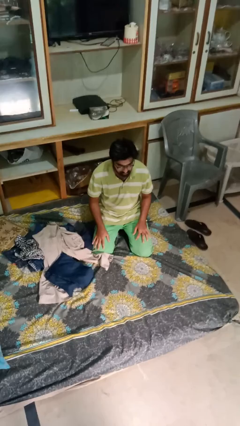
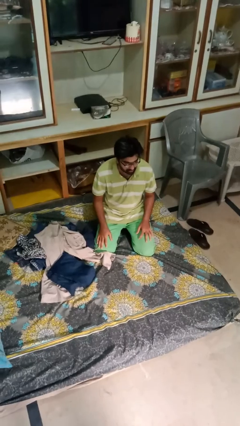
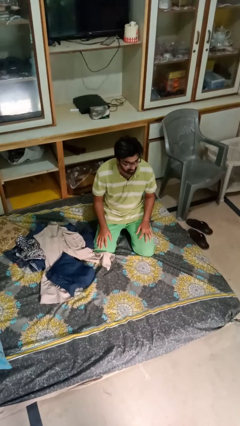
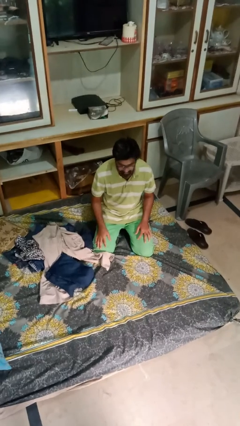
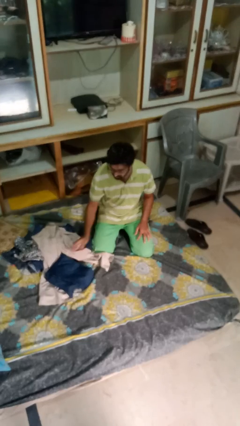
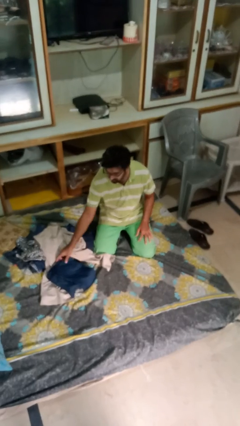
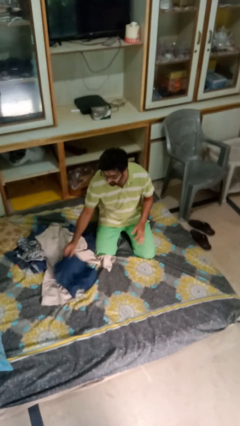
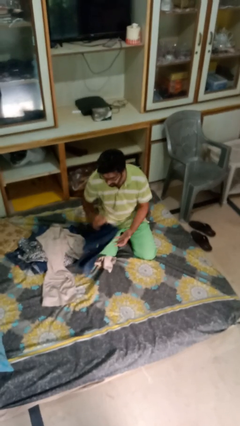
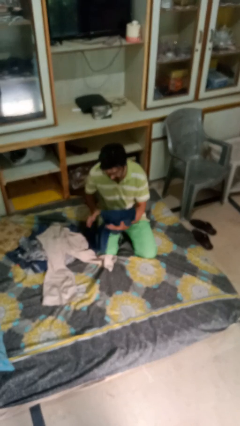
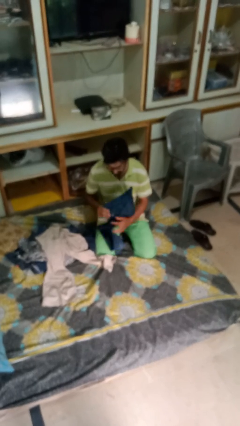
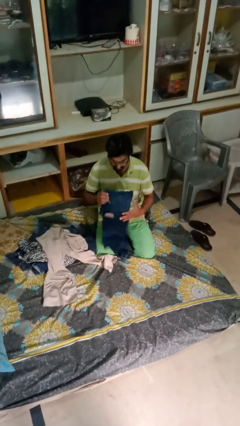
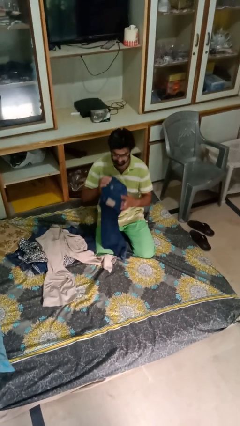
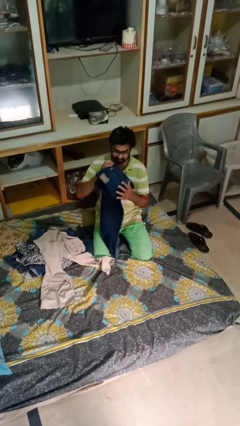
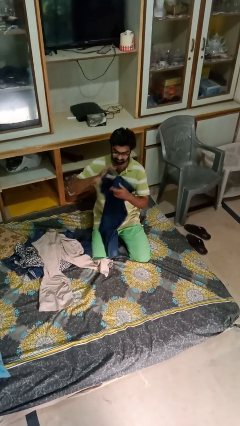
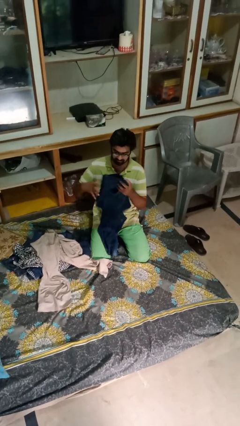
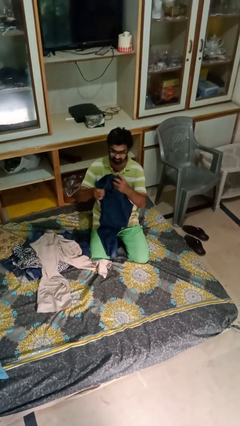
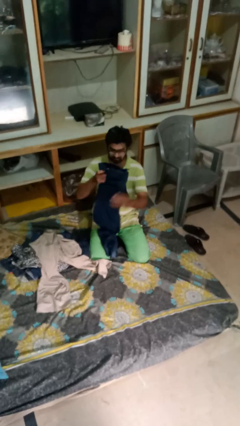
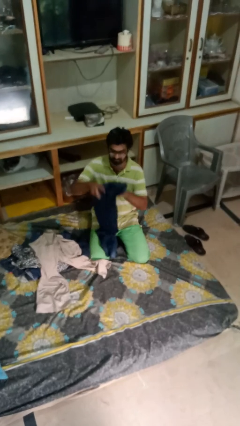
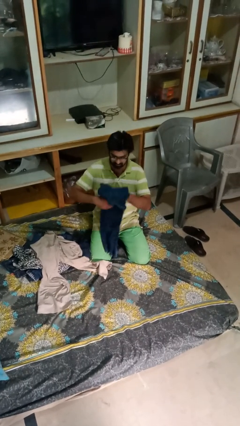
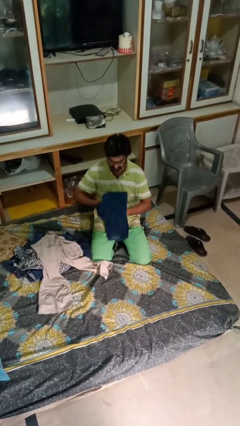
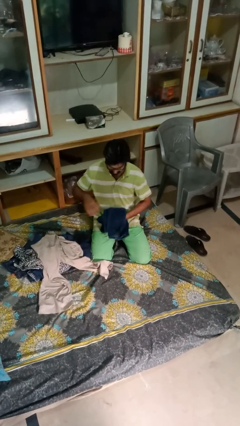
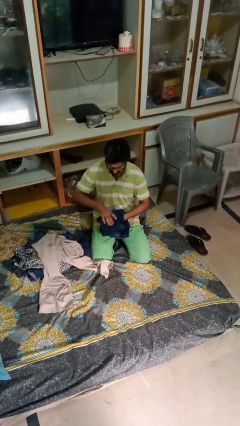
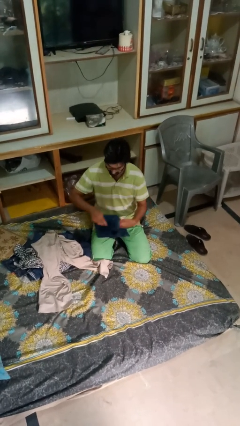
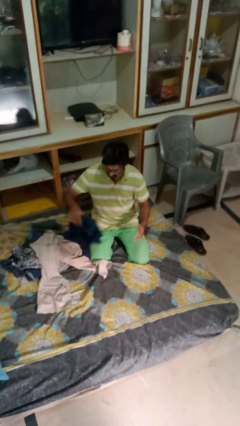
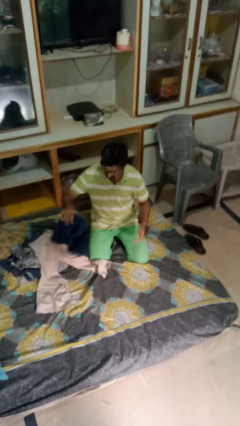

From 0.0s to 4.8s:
person folds pants

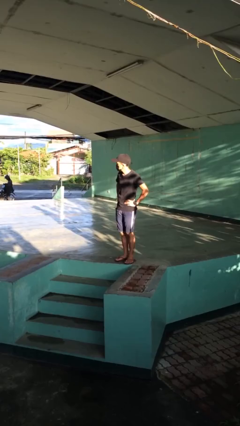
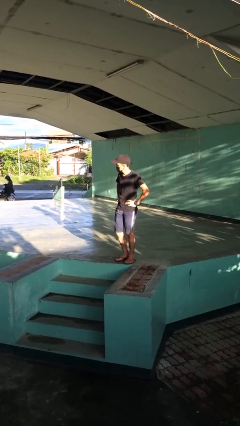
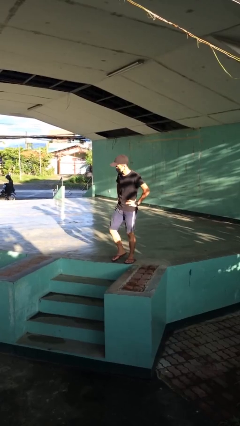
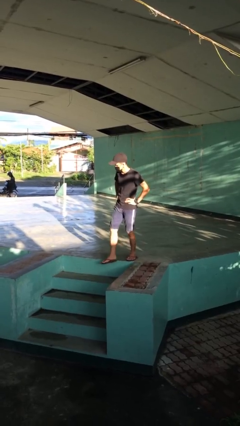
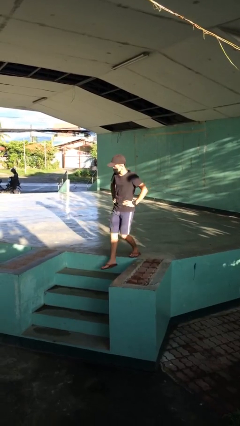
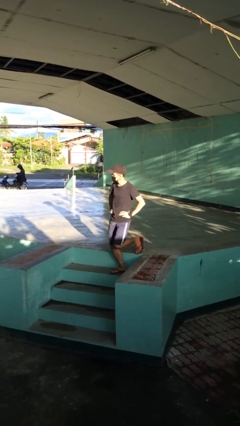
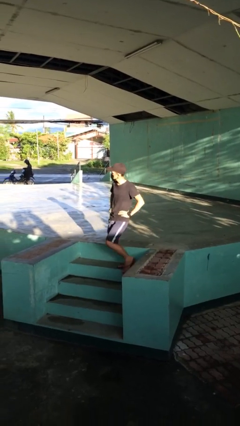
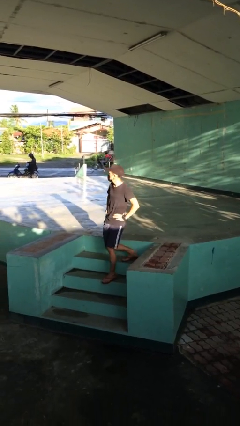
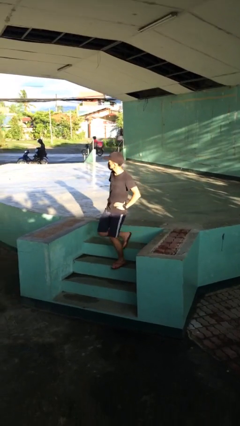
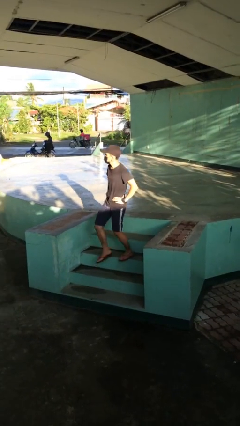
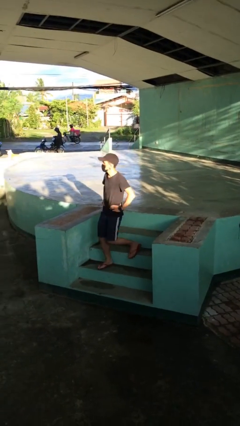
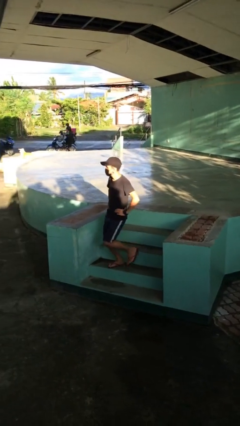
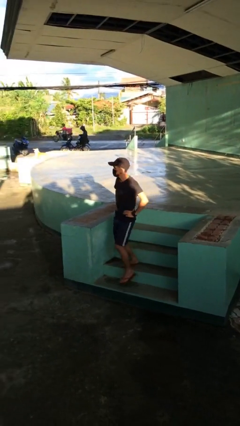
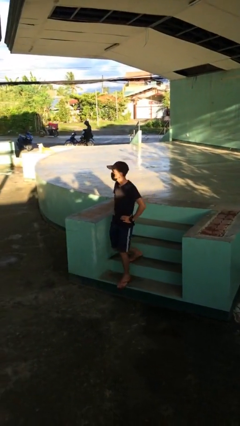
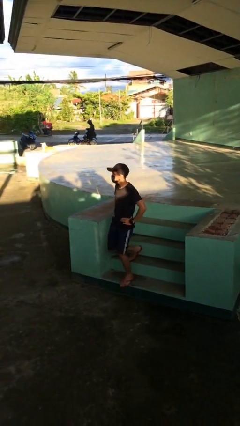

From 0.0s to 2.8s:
person climbs down stairs

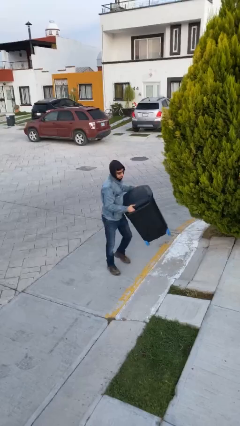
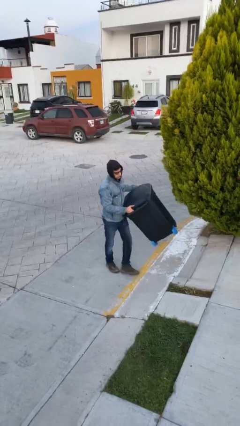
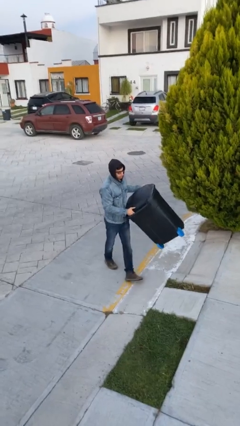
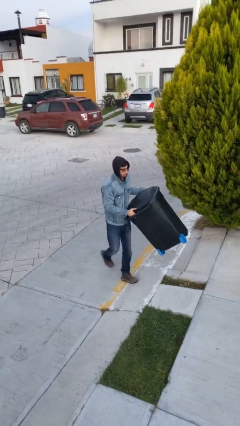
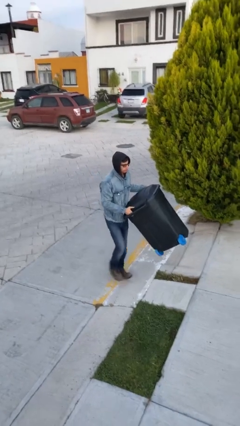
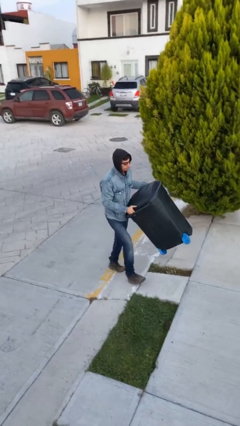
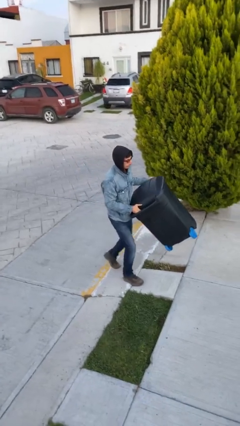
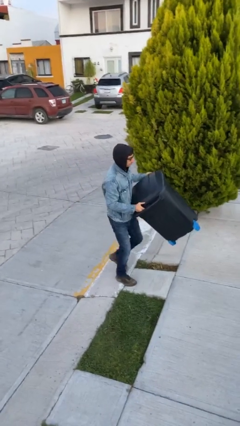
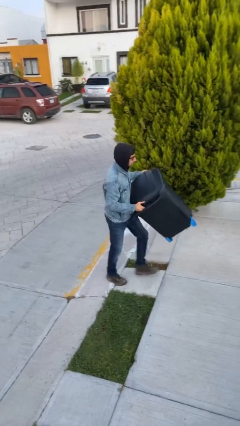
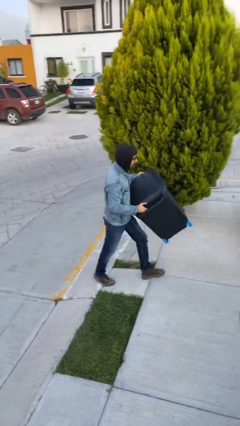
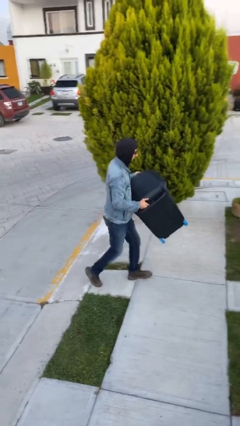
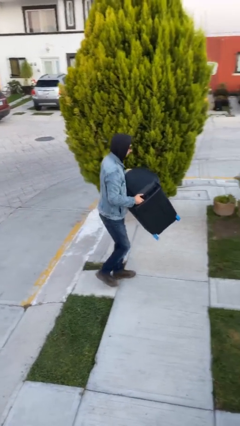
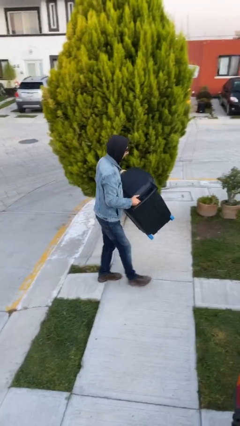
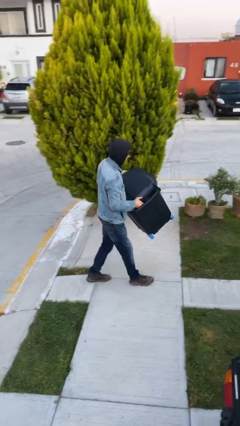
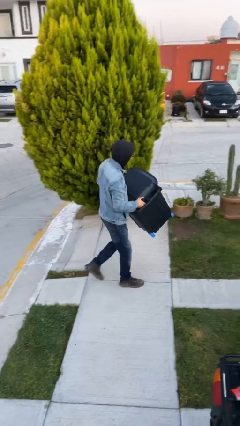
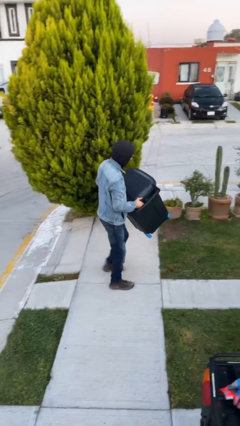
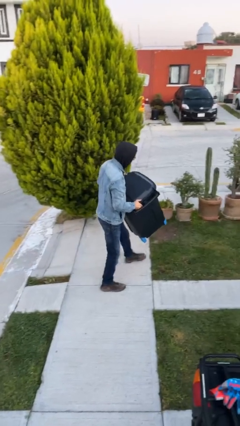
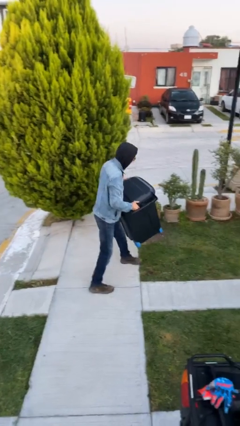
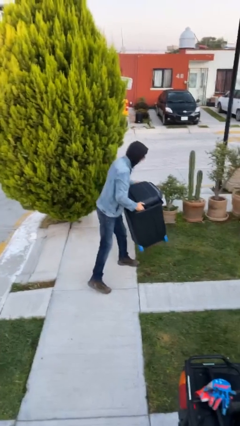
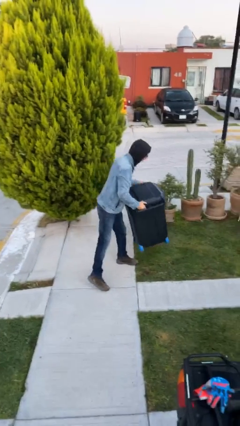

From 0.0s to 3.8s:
person carries heavy object

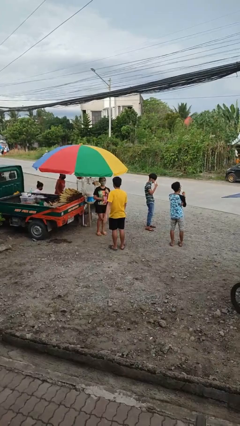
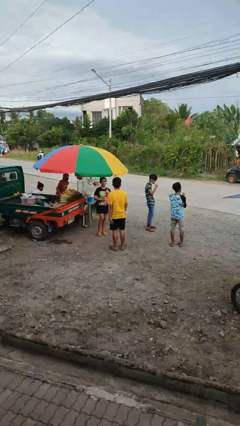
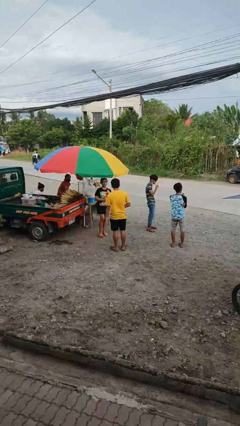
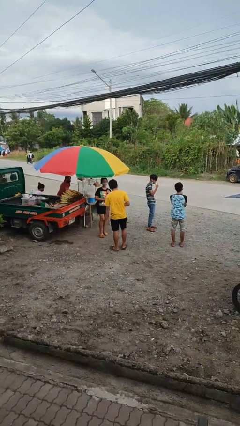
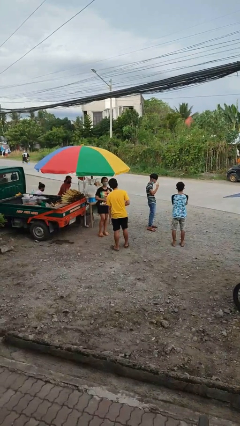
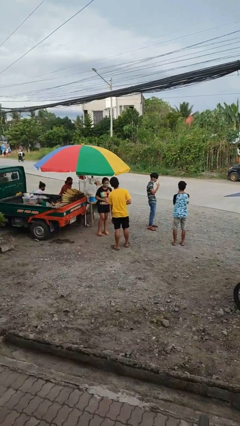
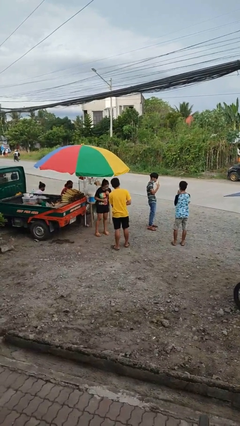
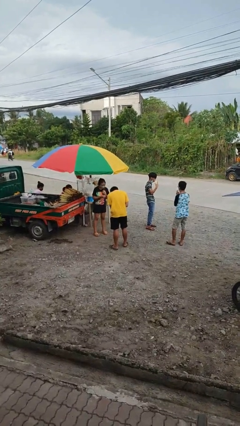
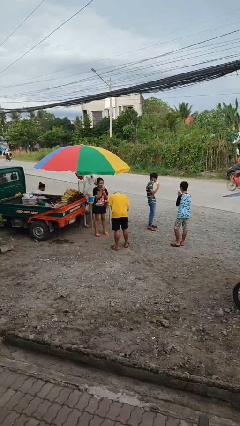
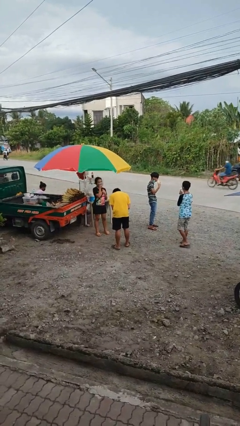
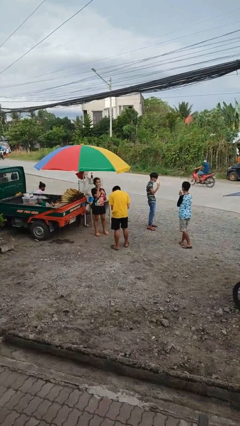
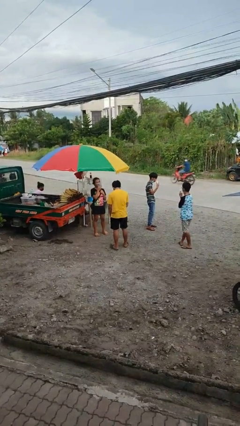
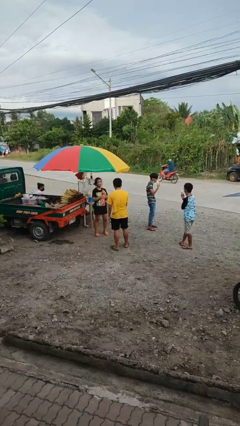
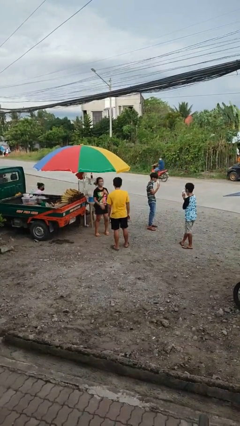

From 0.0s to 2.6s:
person laughs with person

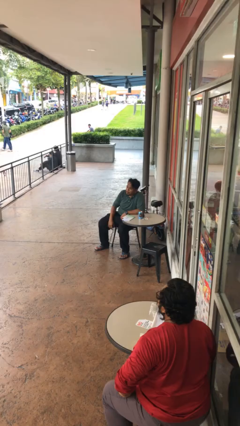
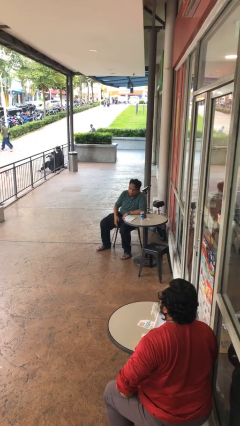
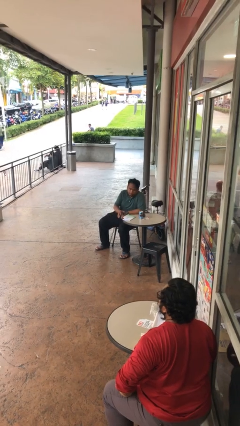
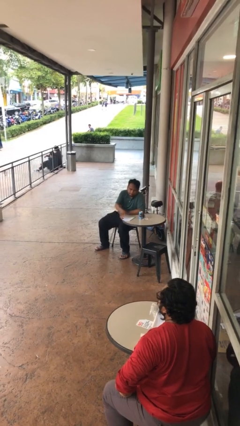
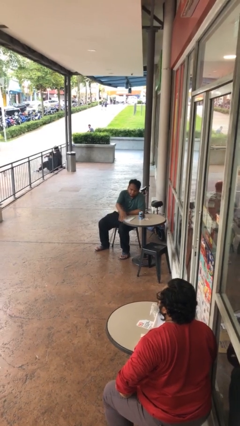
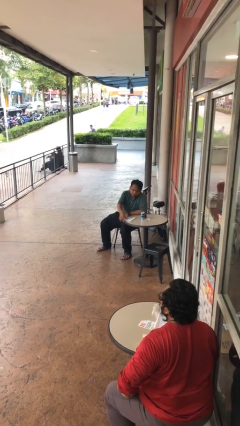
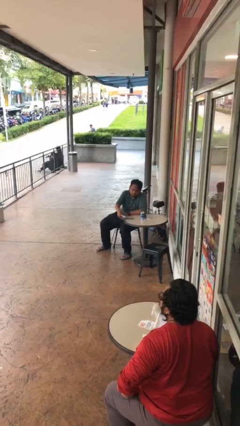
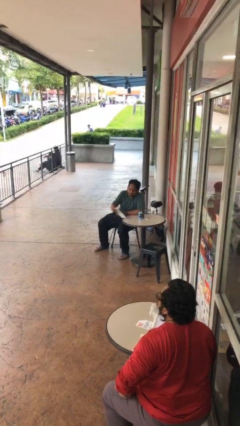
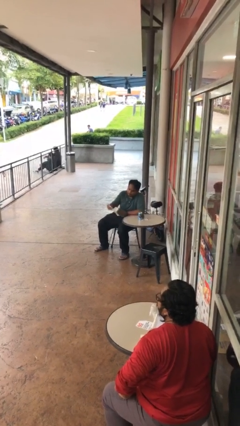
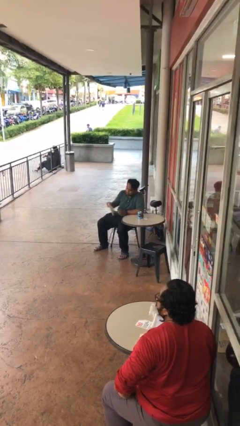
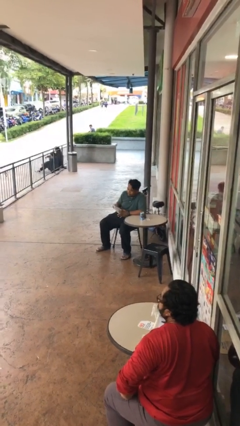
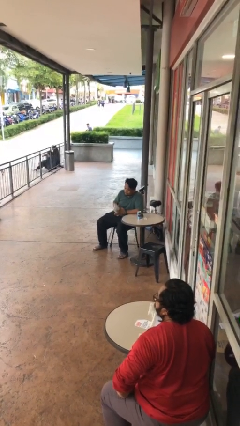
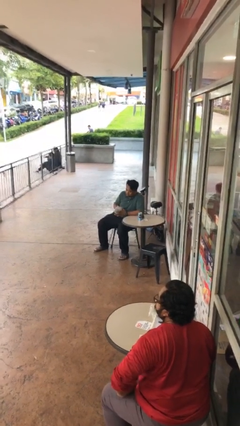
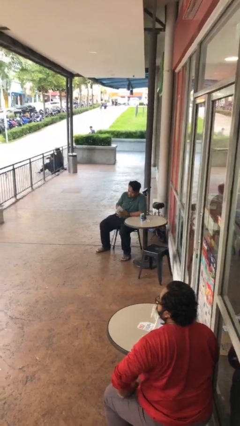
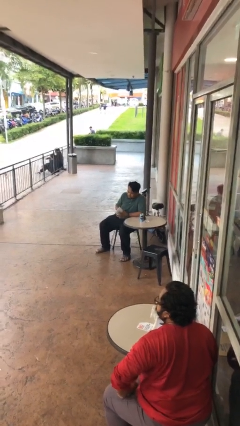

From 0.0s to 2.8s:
person picks up object from table

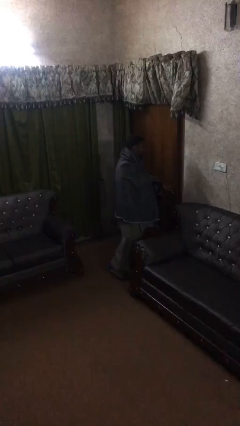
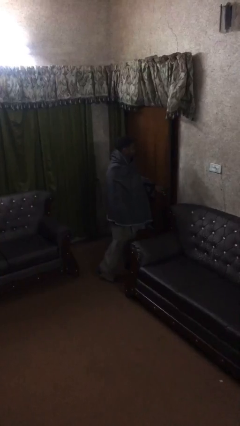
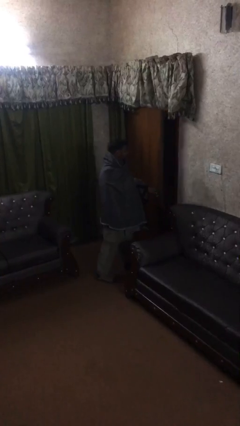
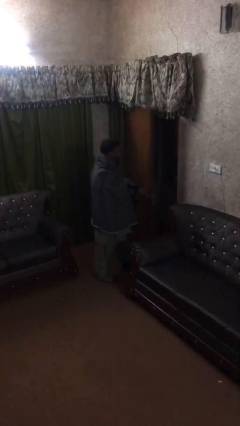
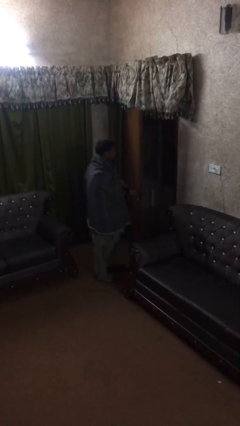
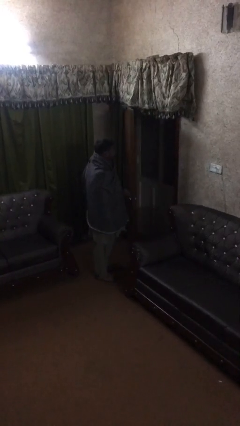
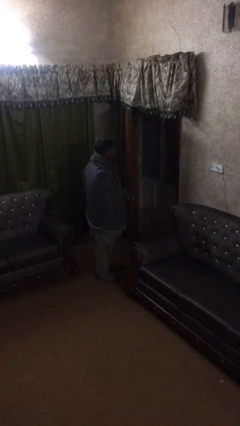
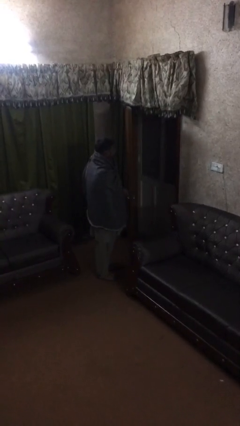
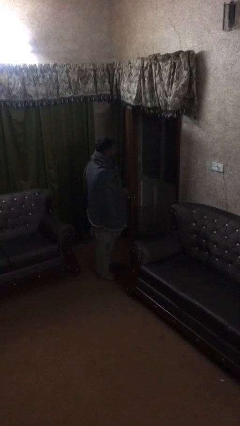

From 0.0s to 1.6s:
person opens facility door
